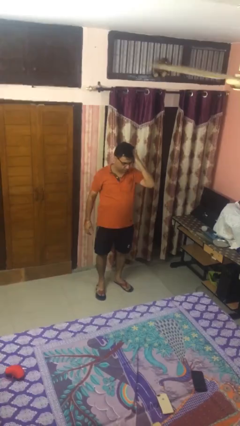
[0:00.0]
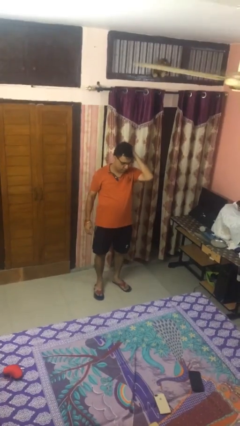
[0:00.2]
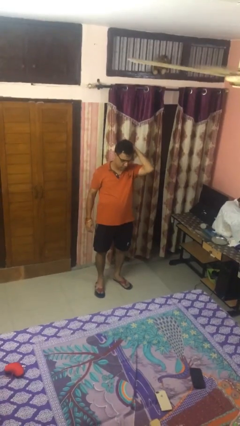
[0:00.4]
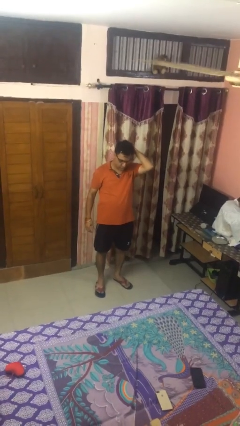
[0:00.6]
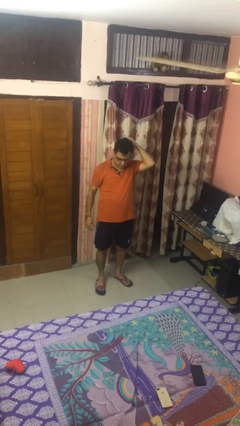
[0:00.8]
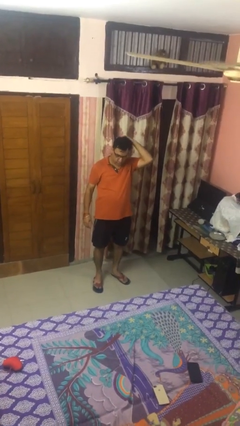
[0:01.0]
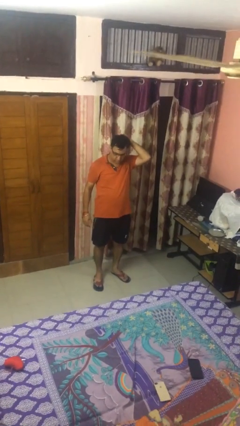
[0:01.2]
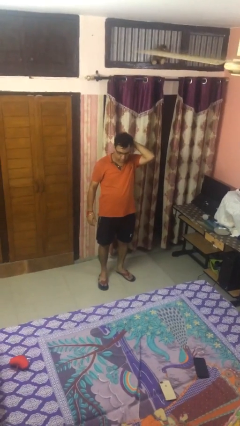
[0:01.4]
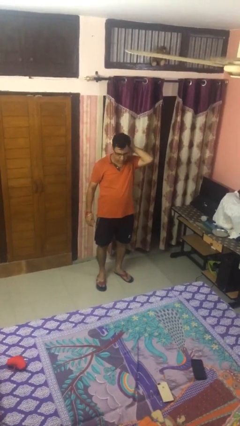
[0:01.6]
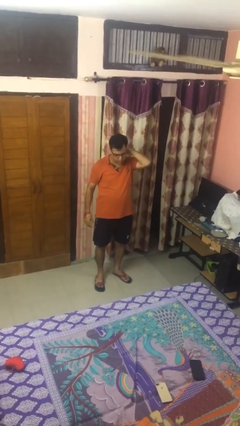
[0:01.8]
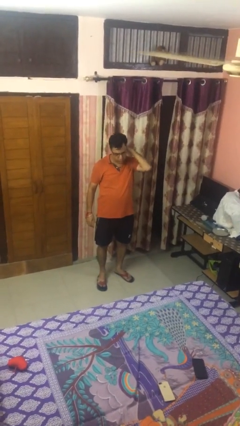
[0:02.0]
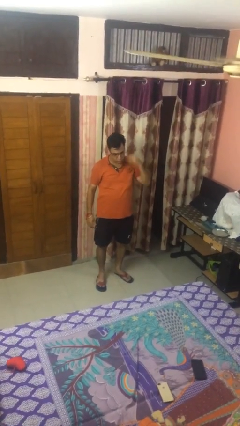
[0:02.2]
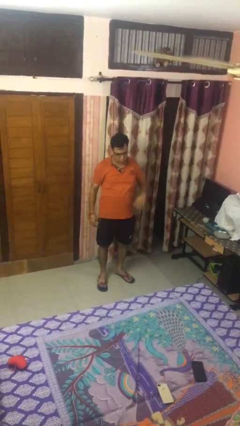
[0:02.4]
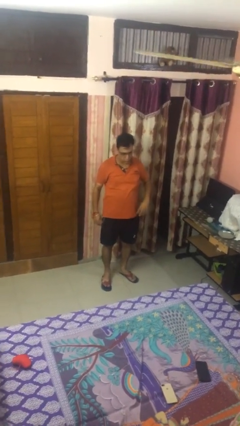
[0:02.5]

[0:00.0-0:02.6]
person strokes hair

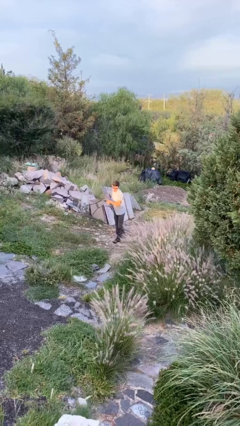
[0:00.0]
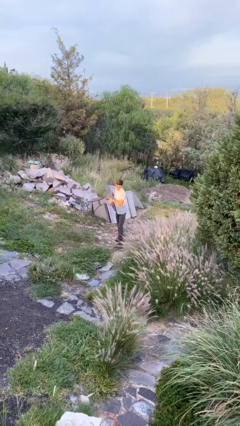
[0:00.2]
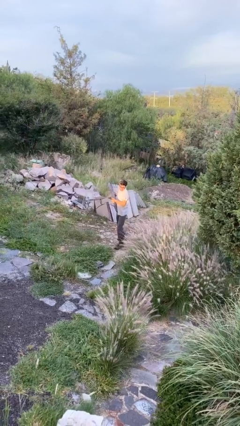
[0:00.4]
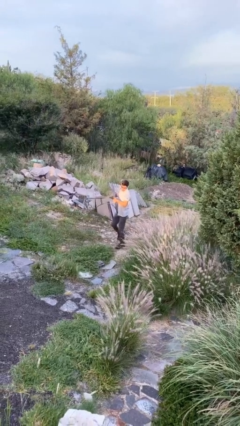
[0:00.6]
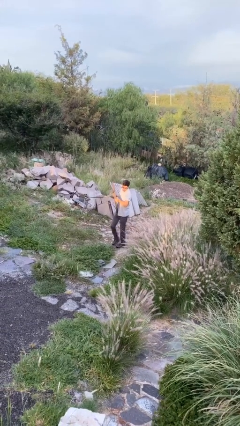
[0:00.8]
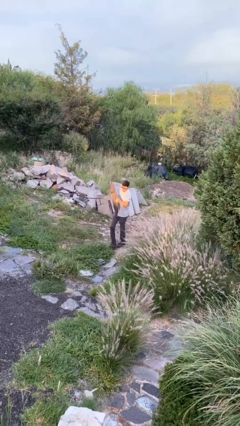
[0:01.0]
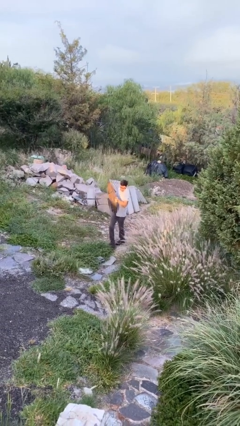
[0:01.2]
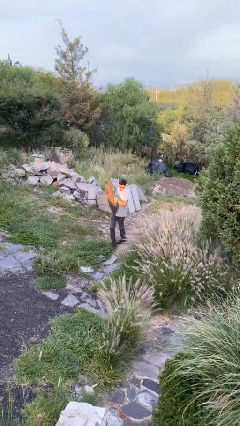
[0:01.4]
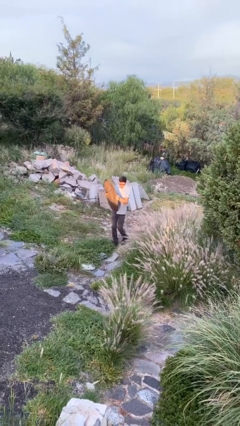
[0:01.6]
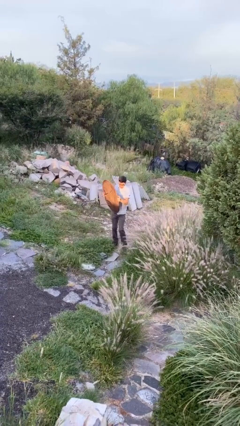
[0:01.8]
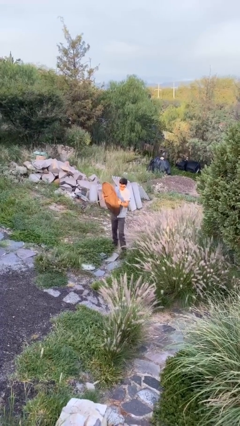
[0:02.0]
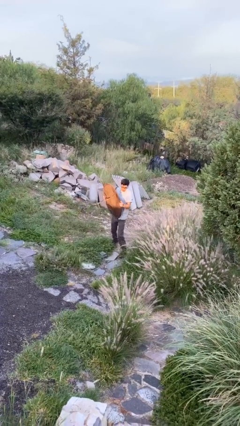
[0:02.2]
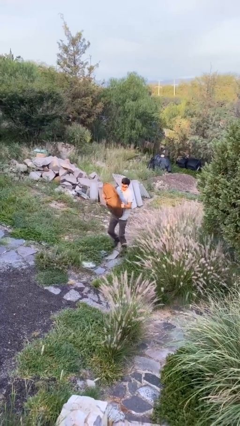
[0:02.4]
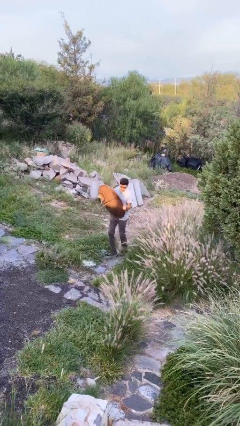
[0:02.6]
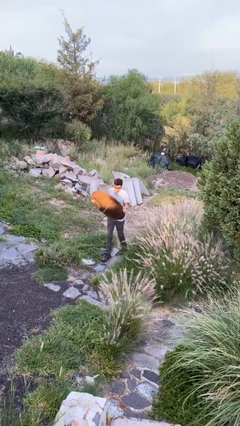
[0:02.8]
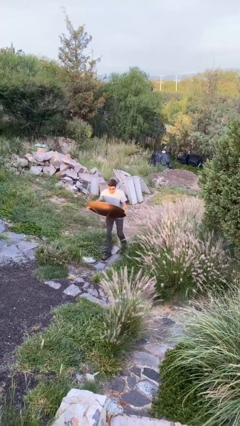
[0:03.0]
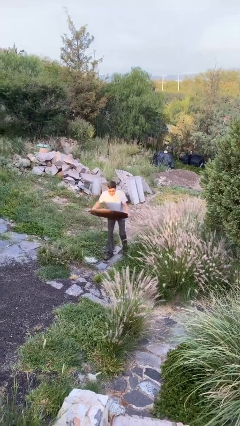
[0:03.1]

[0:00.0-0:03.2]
person carries heavy object

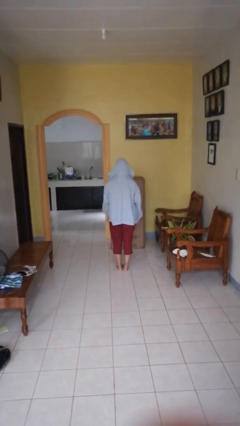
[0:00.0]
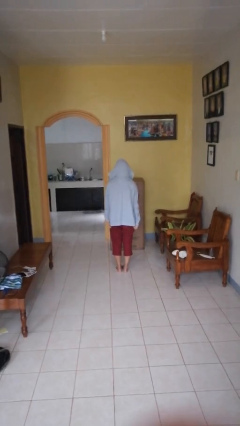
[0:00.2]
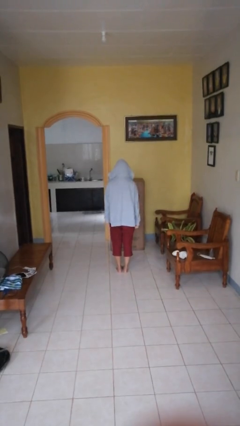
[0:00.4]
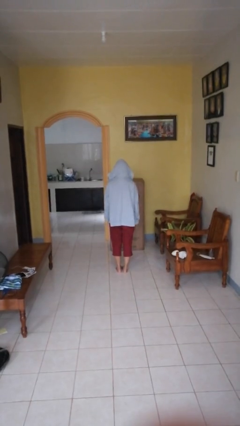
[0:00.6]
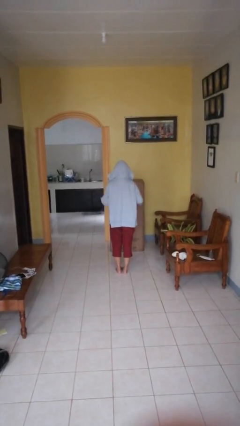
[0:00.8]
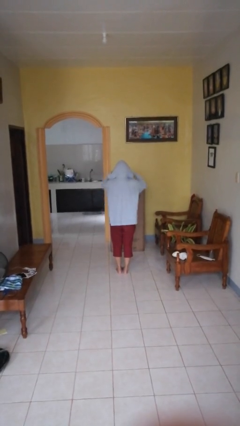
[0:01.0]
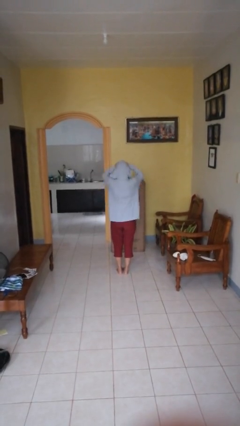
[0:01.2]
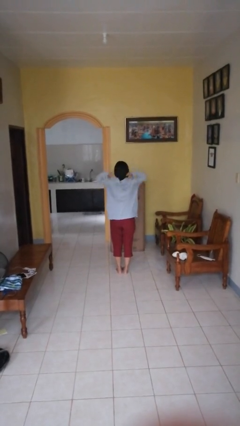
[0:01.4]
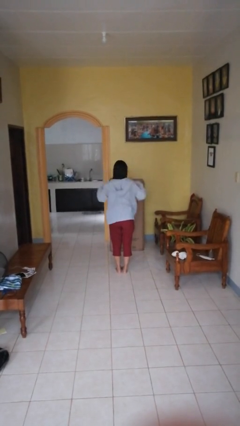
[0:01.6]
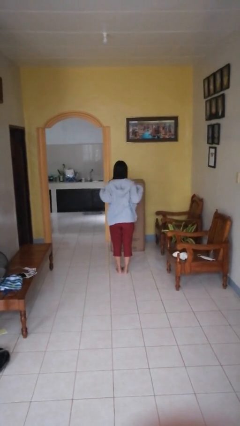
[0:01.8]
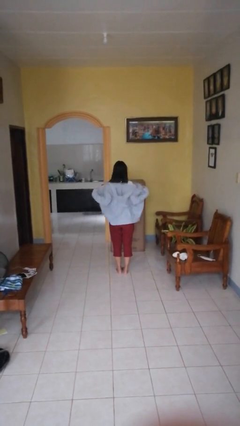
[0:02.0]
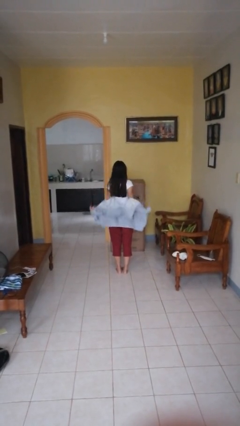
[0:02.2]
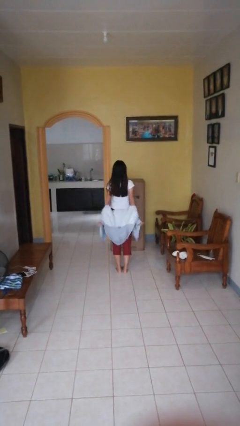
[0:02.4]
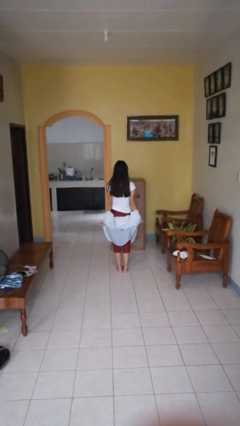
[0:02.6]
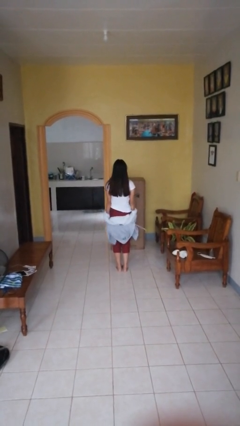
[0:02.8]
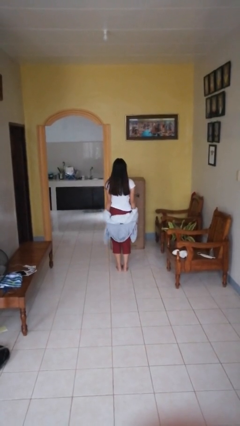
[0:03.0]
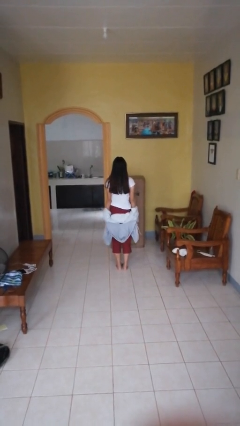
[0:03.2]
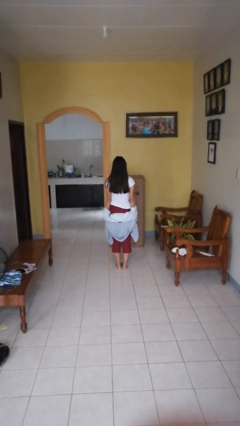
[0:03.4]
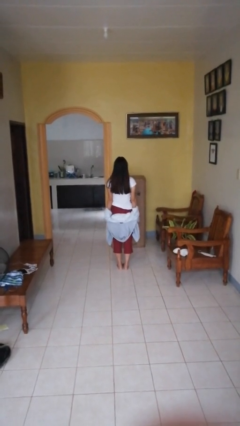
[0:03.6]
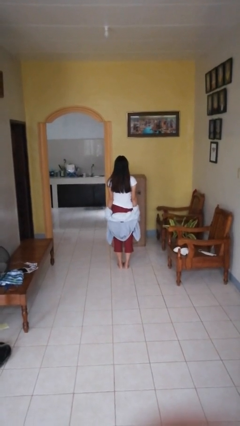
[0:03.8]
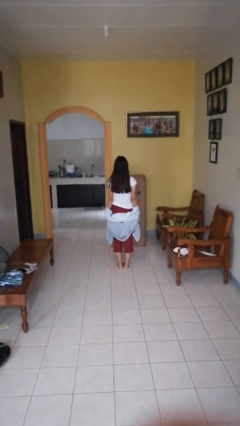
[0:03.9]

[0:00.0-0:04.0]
person takes off hoodie

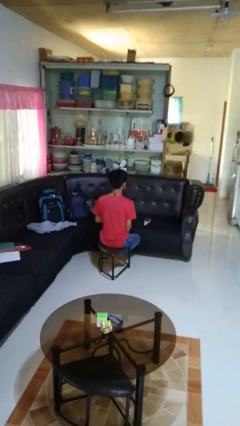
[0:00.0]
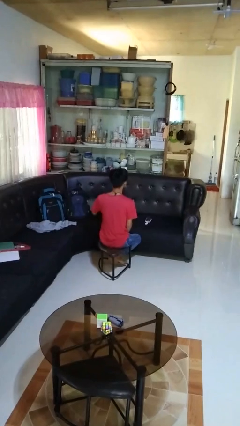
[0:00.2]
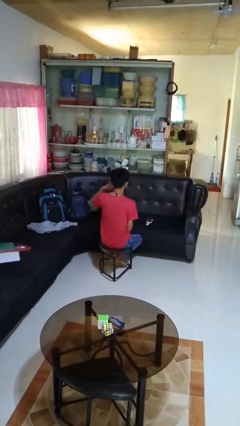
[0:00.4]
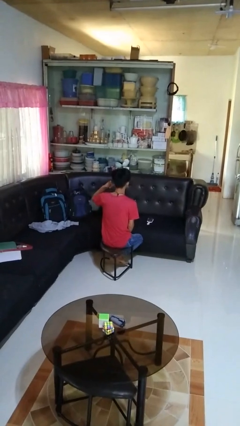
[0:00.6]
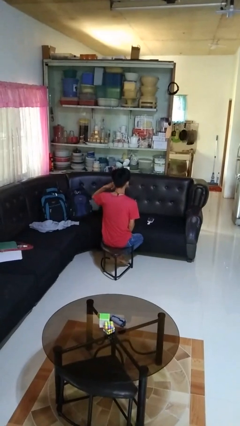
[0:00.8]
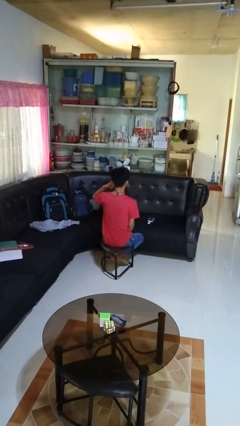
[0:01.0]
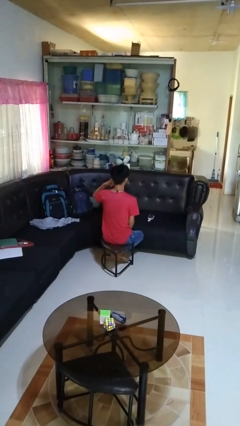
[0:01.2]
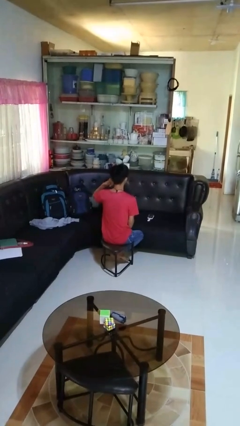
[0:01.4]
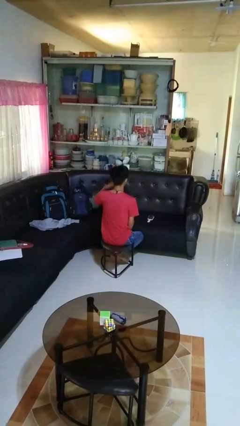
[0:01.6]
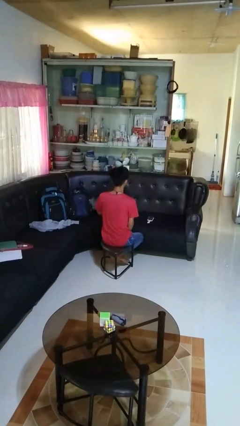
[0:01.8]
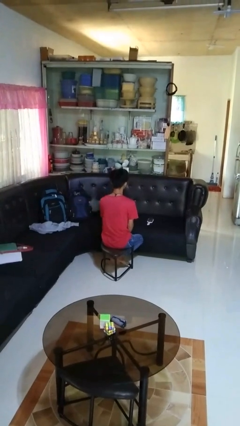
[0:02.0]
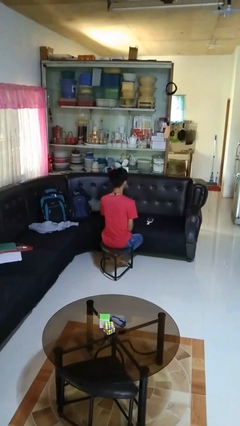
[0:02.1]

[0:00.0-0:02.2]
person gestures call me

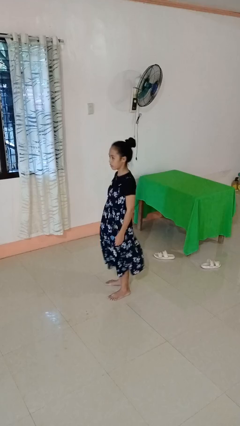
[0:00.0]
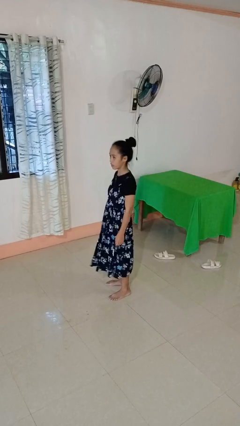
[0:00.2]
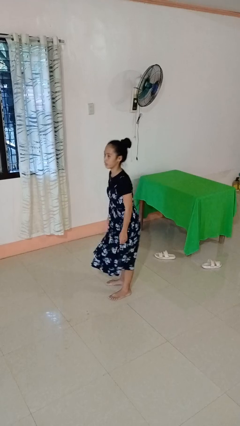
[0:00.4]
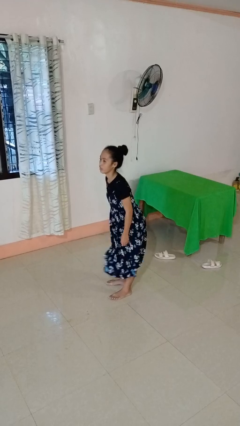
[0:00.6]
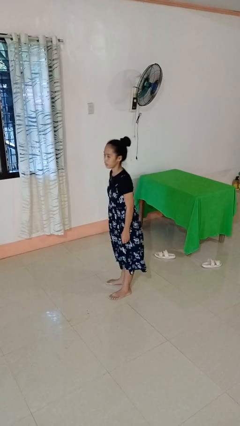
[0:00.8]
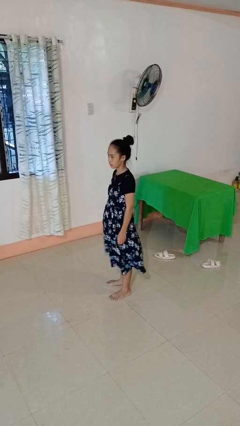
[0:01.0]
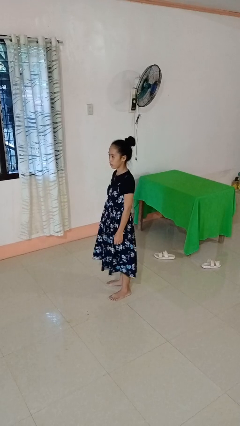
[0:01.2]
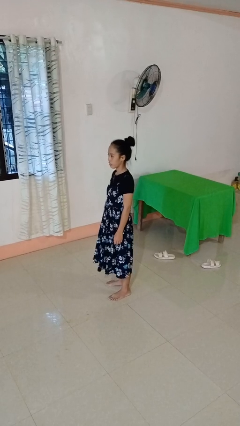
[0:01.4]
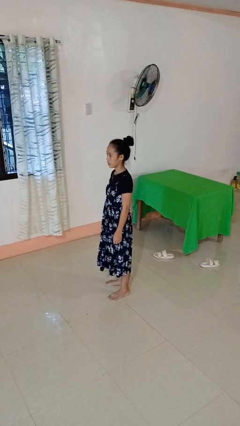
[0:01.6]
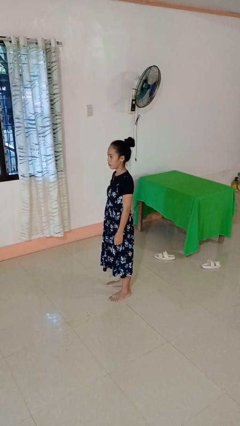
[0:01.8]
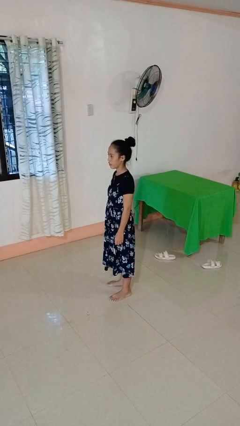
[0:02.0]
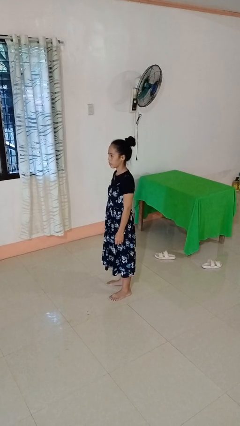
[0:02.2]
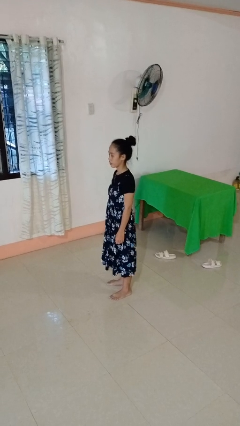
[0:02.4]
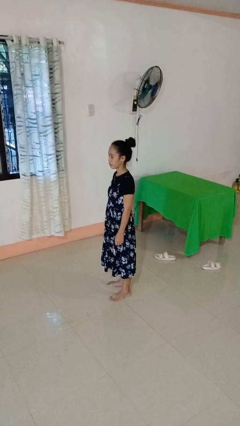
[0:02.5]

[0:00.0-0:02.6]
person wiggles hips

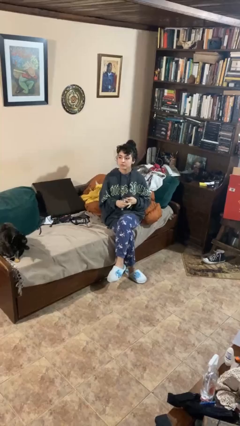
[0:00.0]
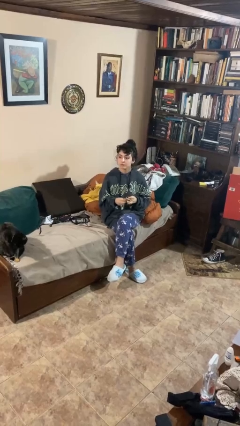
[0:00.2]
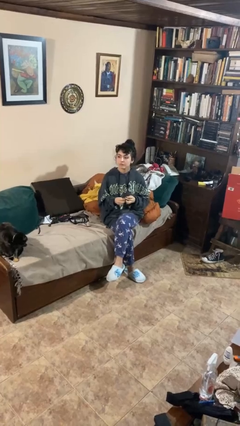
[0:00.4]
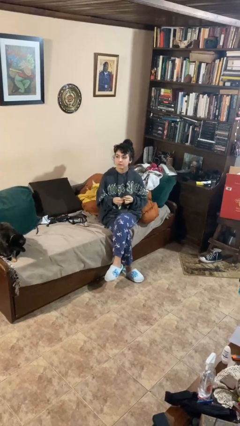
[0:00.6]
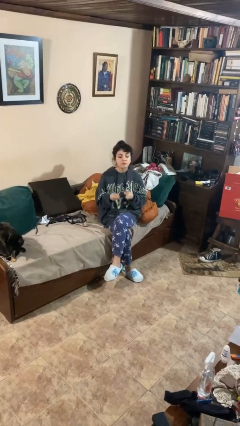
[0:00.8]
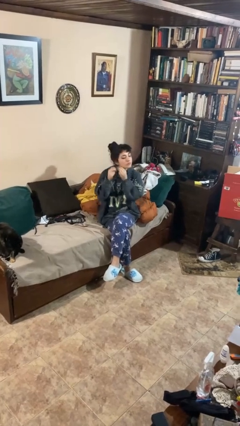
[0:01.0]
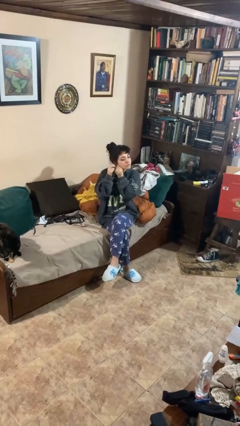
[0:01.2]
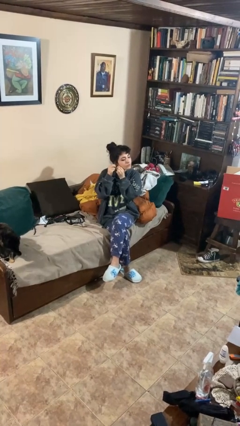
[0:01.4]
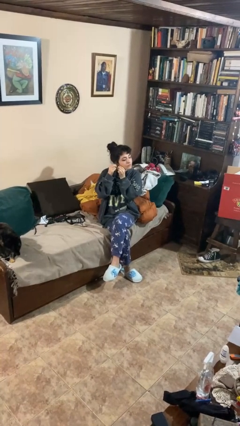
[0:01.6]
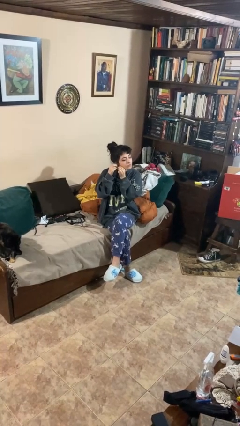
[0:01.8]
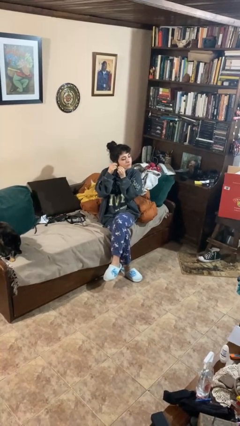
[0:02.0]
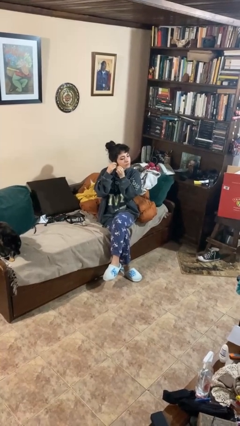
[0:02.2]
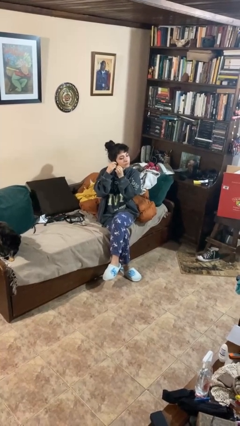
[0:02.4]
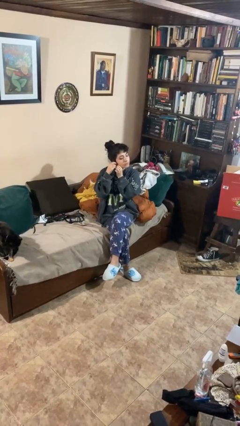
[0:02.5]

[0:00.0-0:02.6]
person puts on earrings

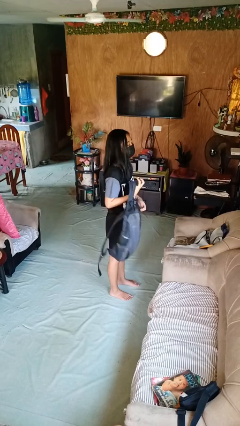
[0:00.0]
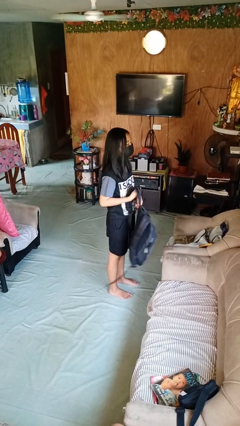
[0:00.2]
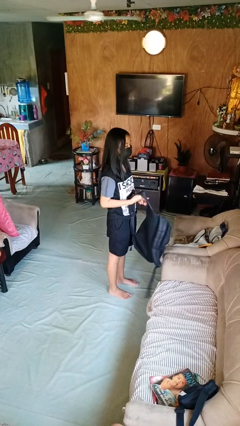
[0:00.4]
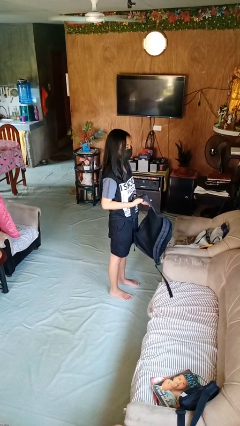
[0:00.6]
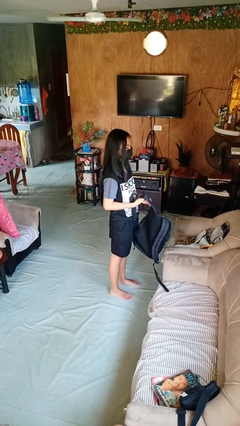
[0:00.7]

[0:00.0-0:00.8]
person takes off backpack
